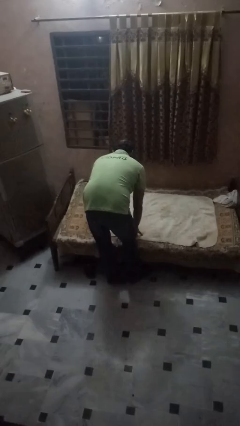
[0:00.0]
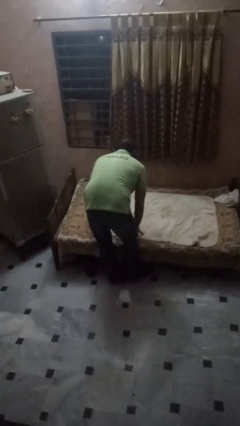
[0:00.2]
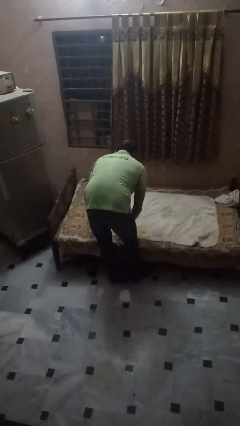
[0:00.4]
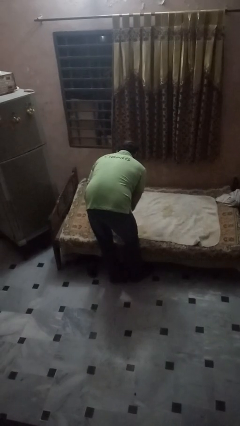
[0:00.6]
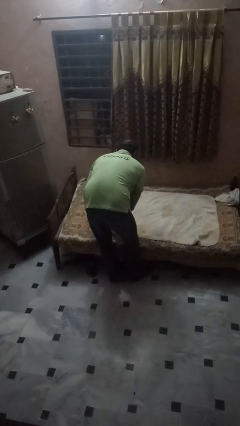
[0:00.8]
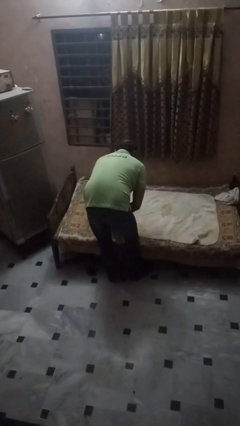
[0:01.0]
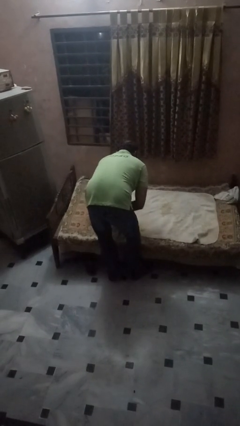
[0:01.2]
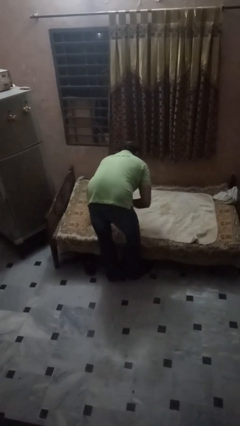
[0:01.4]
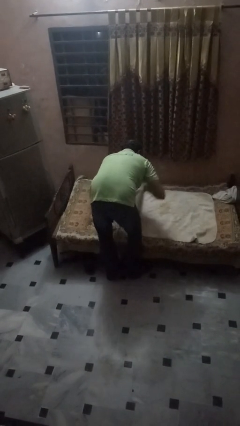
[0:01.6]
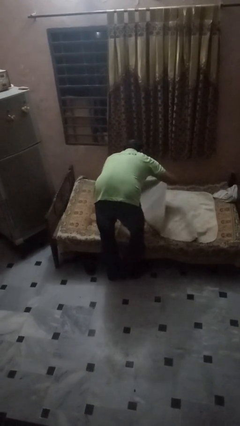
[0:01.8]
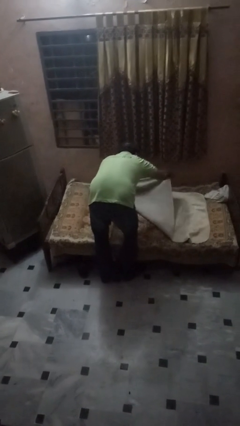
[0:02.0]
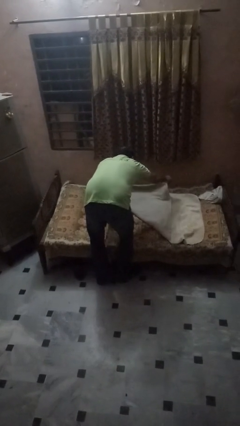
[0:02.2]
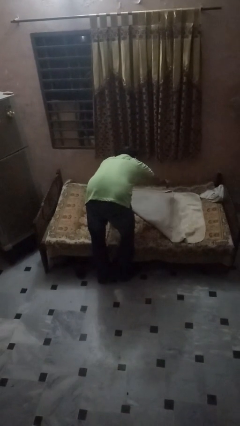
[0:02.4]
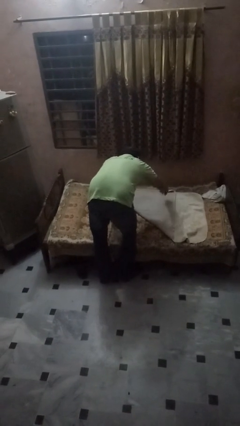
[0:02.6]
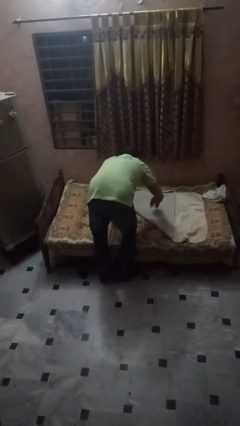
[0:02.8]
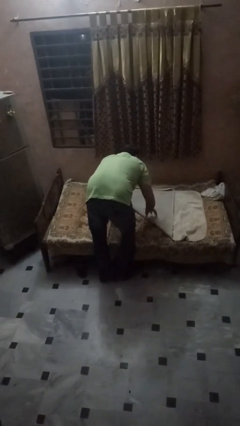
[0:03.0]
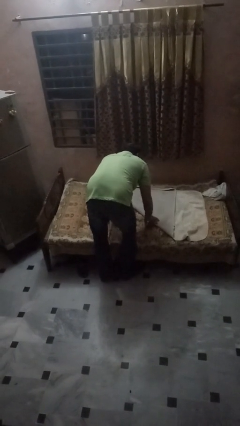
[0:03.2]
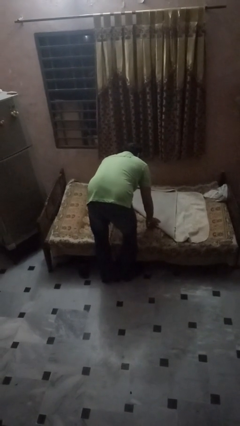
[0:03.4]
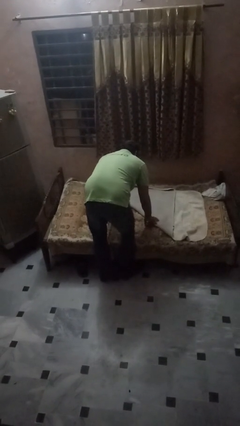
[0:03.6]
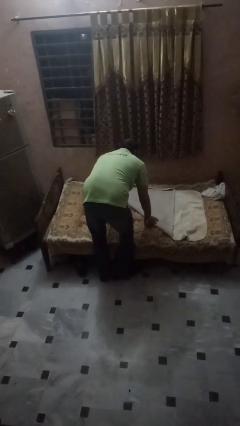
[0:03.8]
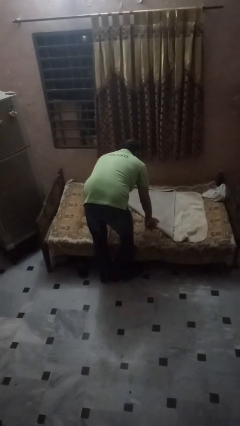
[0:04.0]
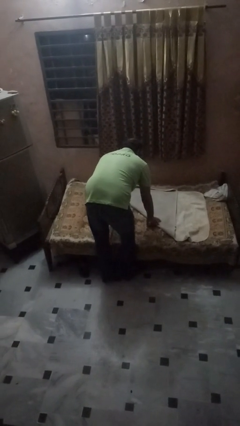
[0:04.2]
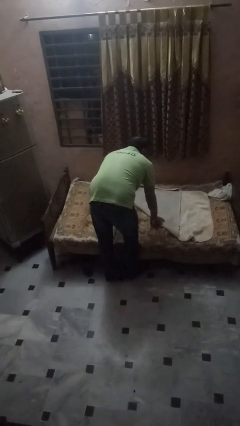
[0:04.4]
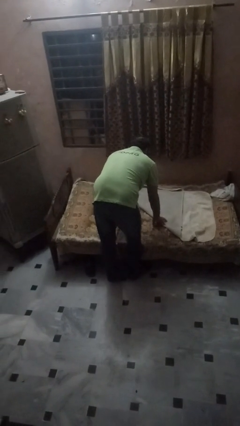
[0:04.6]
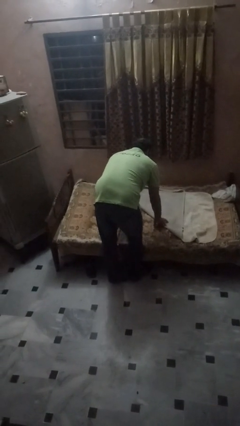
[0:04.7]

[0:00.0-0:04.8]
person folds blanket

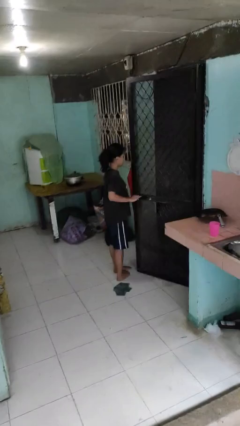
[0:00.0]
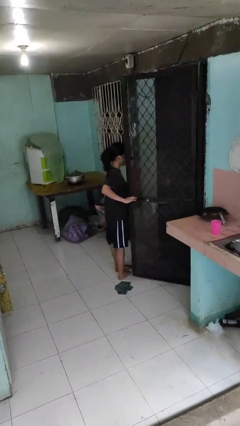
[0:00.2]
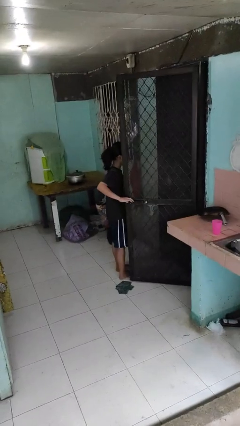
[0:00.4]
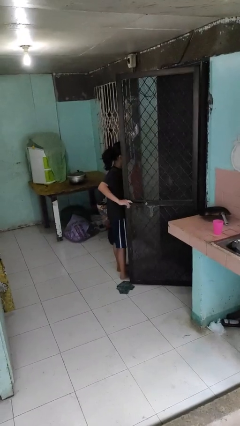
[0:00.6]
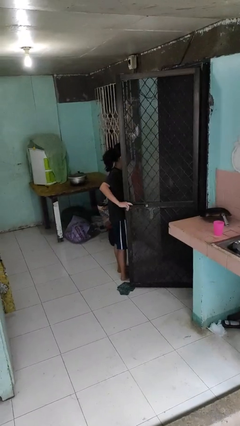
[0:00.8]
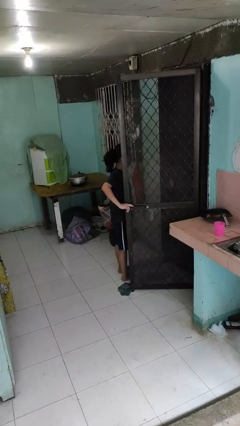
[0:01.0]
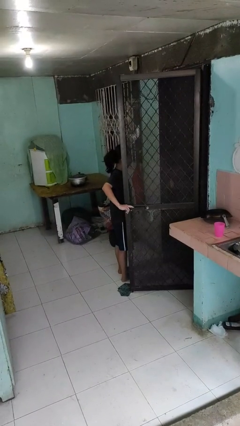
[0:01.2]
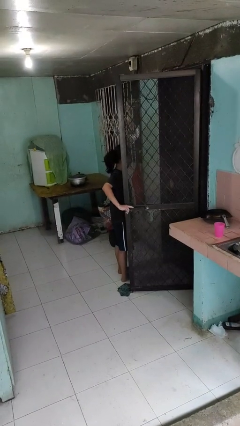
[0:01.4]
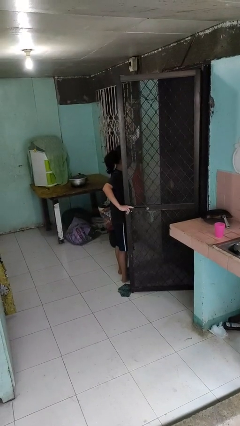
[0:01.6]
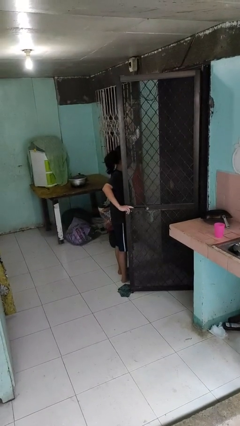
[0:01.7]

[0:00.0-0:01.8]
person opens facility door

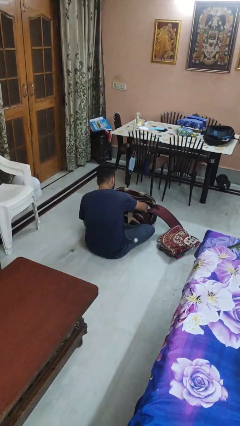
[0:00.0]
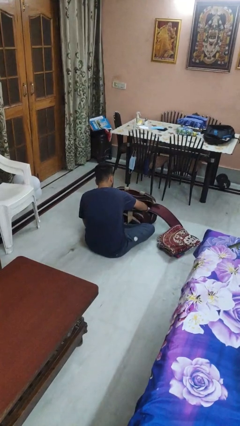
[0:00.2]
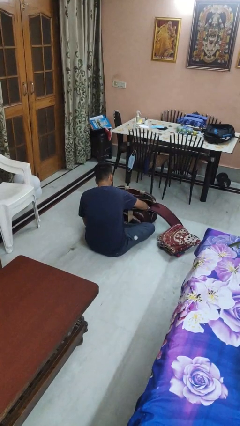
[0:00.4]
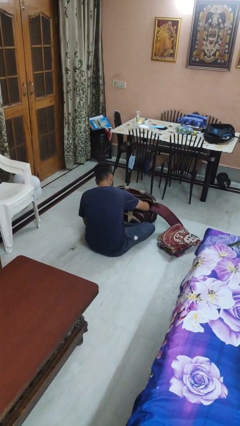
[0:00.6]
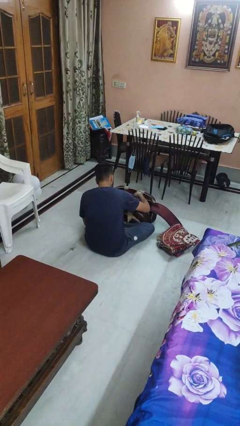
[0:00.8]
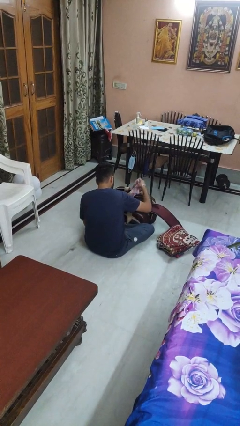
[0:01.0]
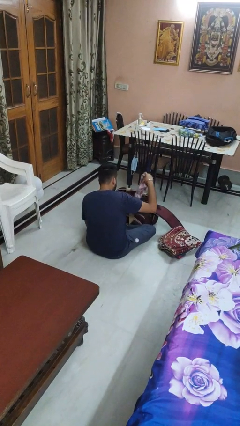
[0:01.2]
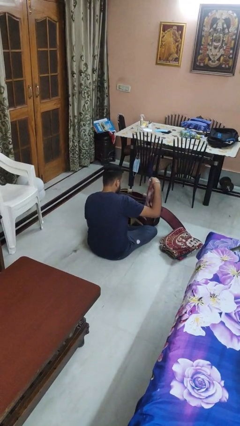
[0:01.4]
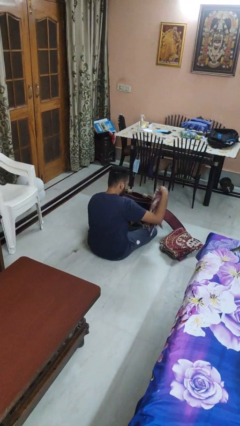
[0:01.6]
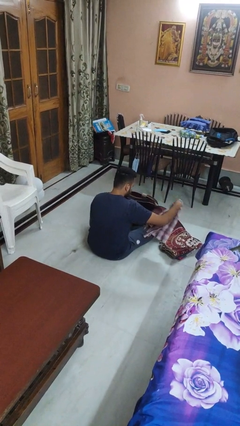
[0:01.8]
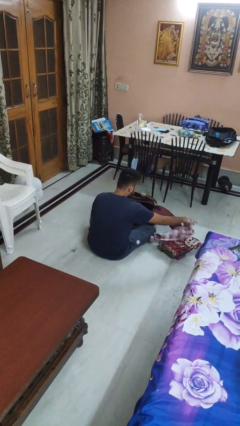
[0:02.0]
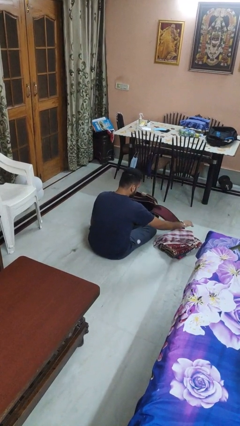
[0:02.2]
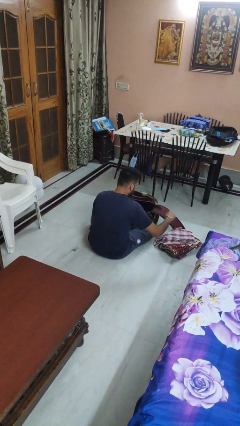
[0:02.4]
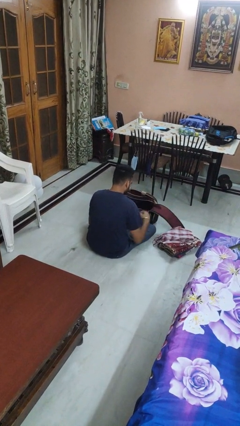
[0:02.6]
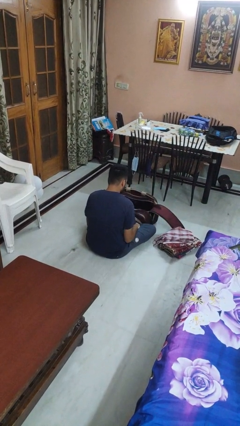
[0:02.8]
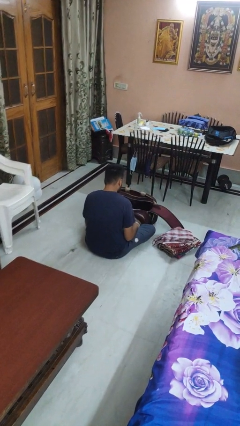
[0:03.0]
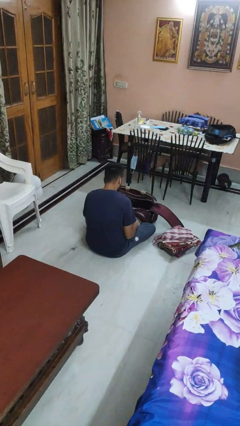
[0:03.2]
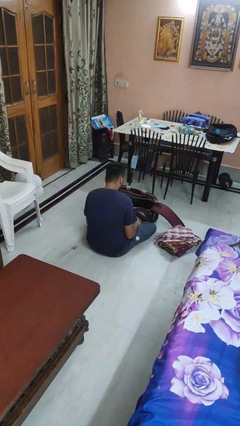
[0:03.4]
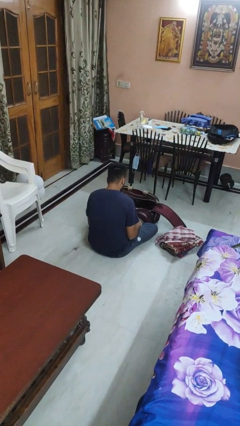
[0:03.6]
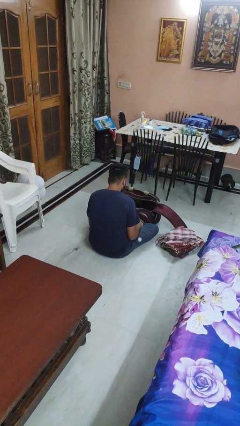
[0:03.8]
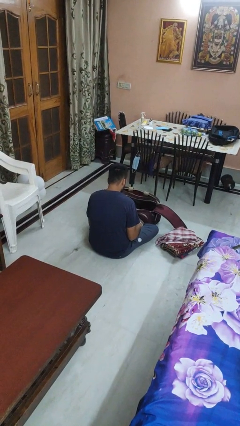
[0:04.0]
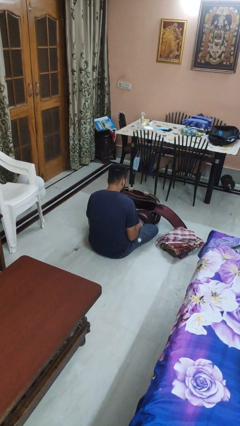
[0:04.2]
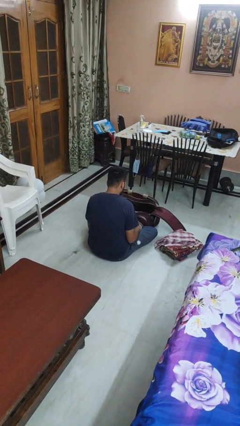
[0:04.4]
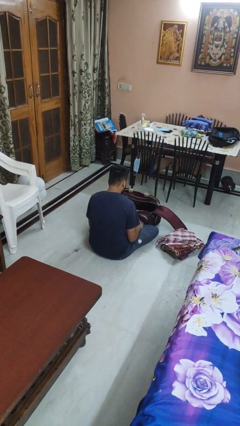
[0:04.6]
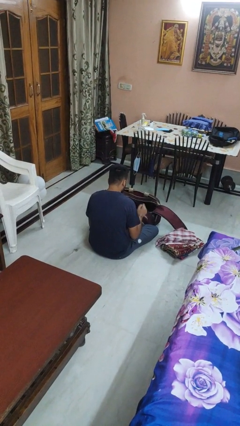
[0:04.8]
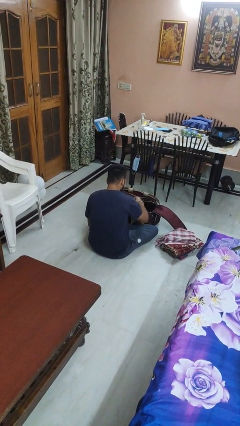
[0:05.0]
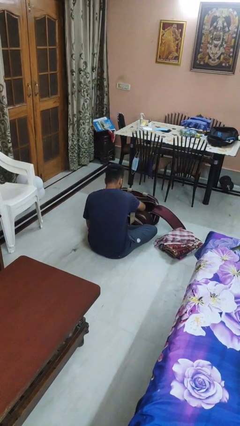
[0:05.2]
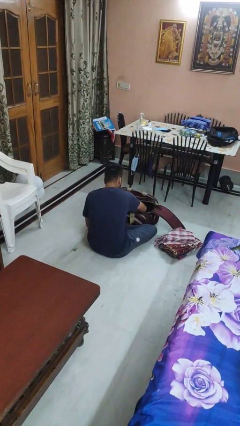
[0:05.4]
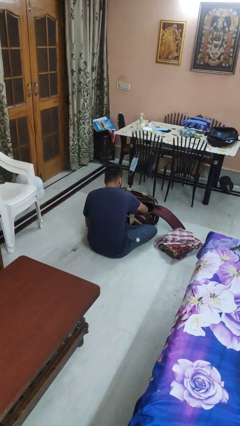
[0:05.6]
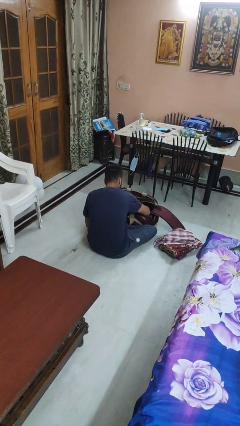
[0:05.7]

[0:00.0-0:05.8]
person arranges flowers in vase

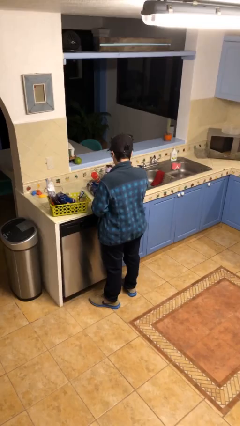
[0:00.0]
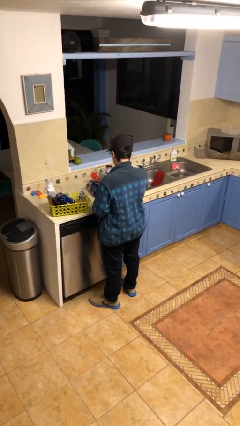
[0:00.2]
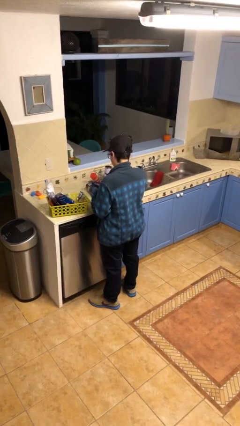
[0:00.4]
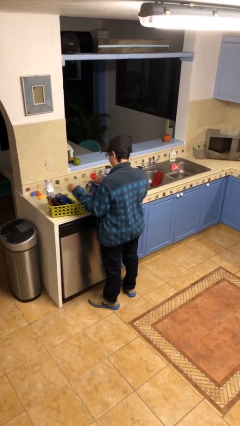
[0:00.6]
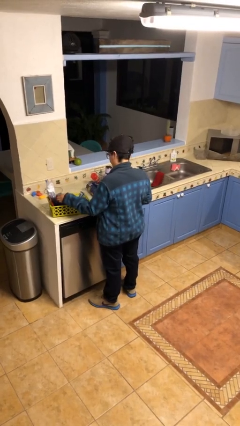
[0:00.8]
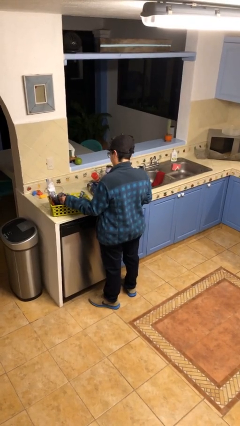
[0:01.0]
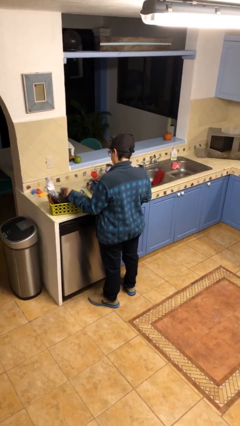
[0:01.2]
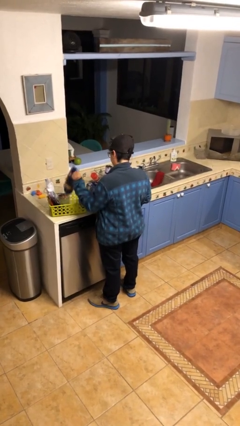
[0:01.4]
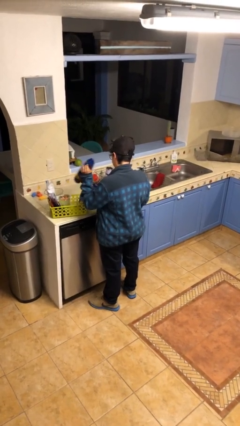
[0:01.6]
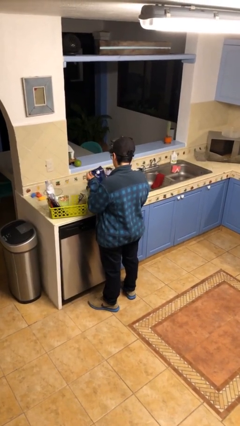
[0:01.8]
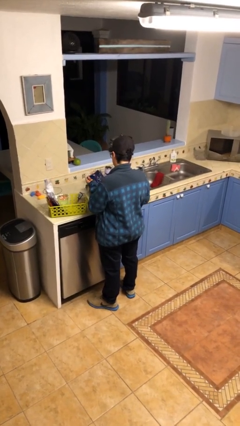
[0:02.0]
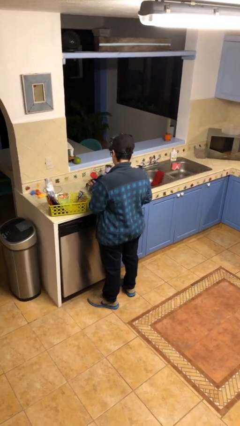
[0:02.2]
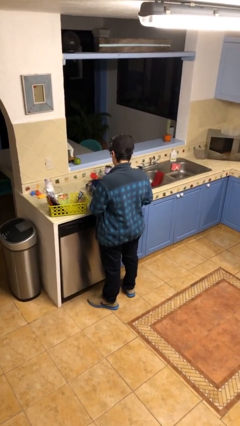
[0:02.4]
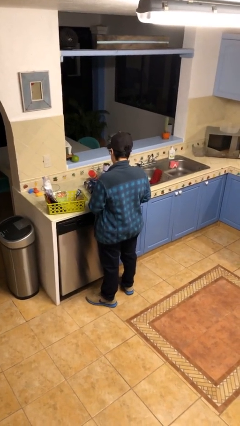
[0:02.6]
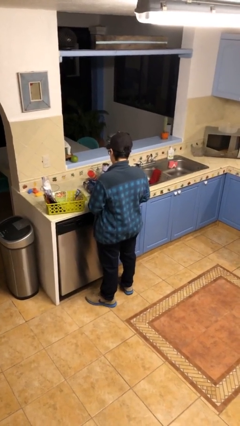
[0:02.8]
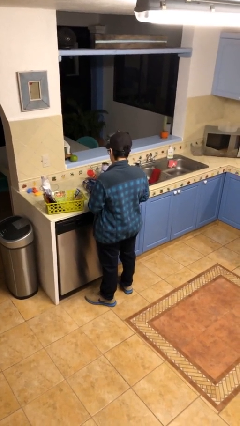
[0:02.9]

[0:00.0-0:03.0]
person takes object from basket

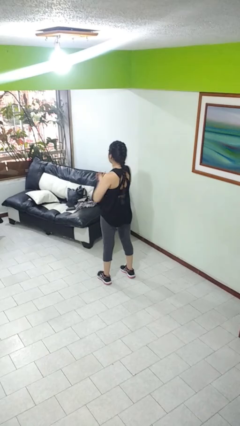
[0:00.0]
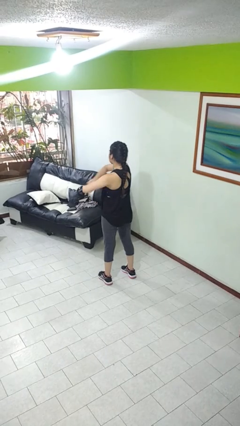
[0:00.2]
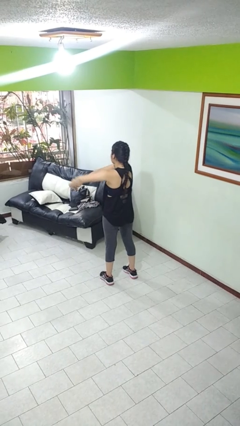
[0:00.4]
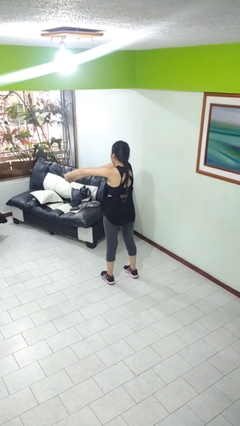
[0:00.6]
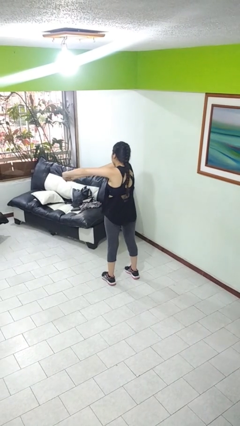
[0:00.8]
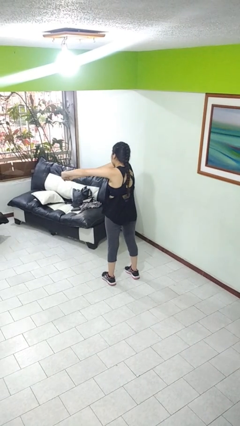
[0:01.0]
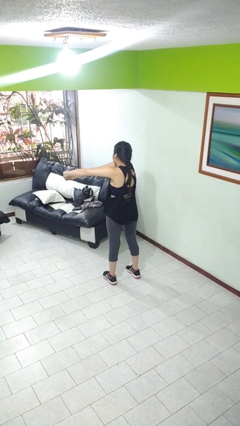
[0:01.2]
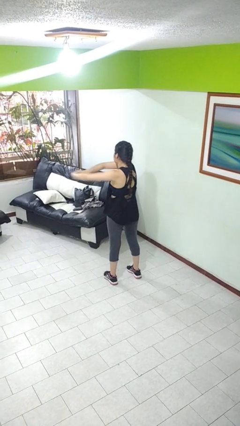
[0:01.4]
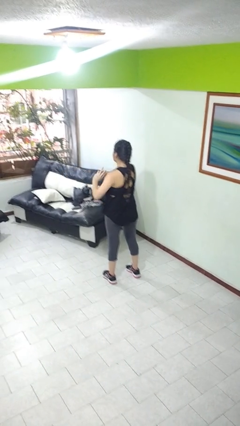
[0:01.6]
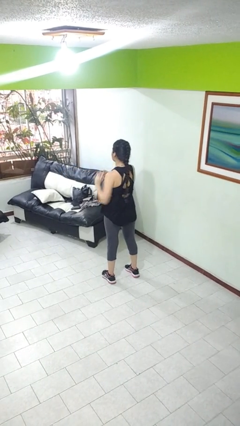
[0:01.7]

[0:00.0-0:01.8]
person stretches arms to side

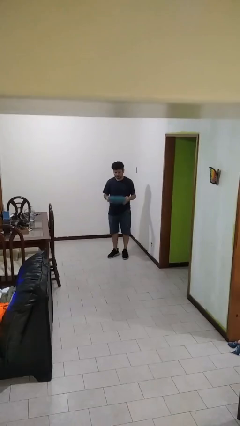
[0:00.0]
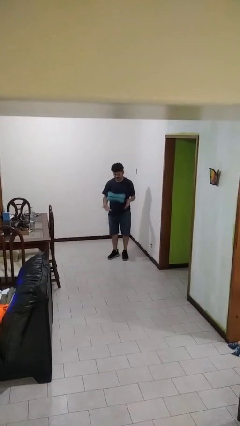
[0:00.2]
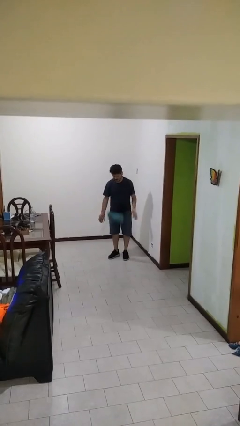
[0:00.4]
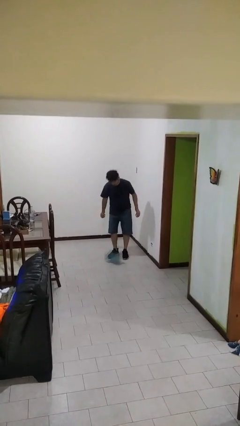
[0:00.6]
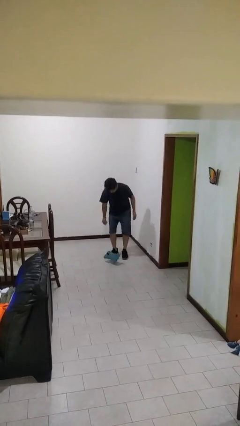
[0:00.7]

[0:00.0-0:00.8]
person drops object
